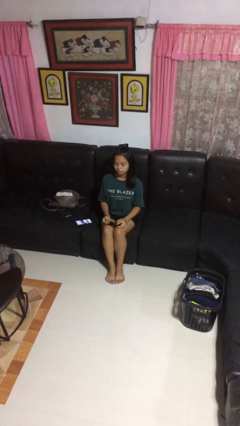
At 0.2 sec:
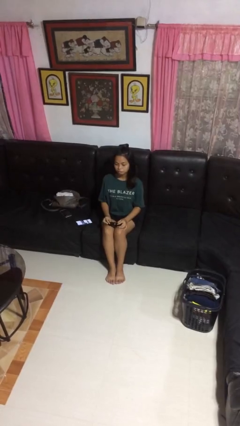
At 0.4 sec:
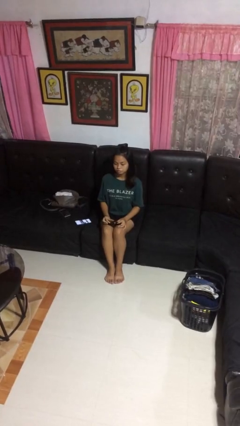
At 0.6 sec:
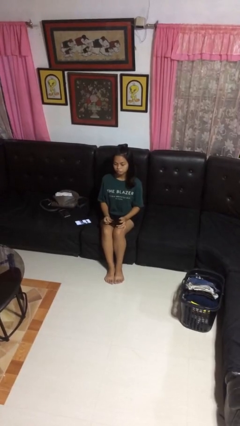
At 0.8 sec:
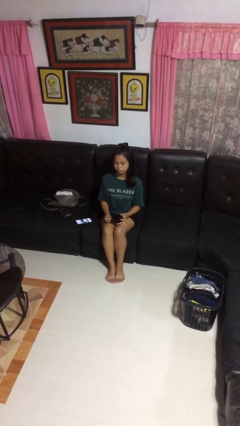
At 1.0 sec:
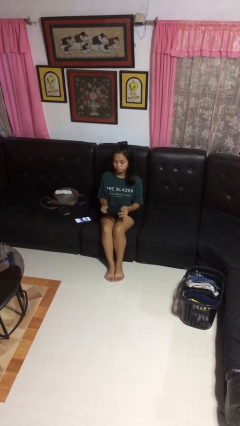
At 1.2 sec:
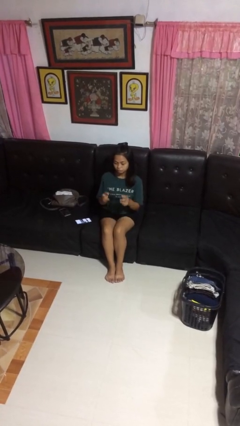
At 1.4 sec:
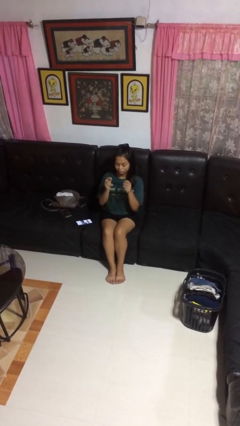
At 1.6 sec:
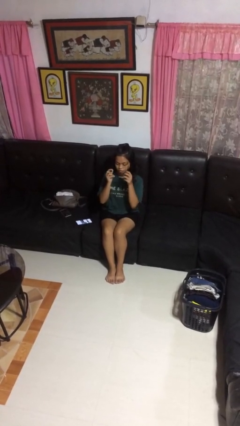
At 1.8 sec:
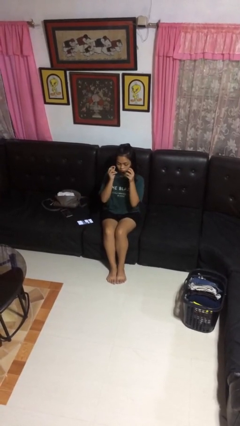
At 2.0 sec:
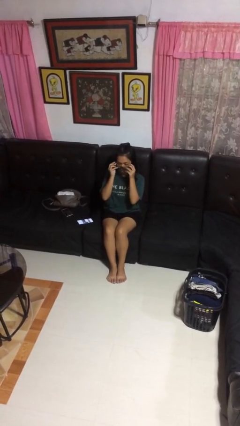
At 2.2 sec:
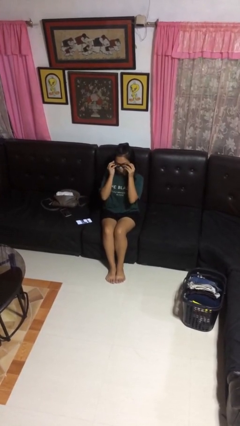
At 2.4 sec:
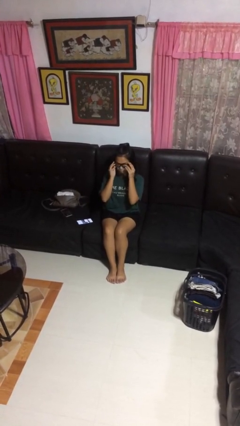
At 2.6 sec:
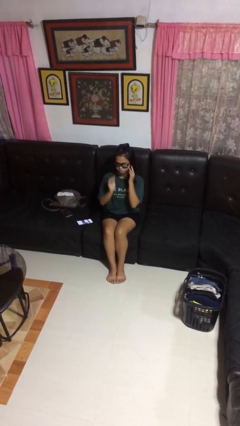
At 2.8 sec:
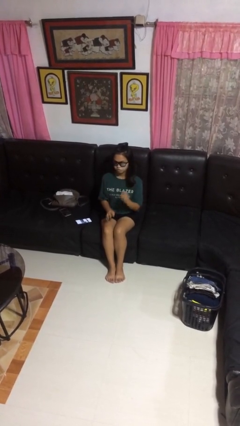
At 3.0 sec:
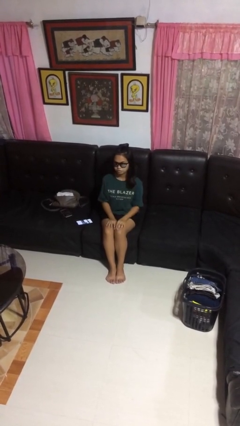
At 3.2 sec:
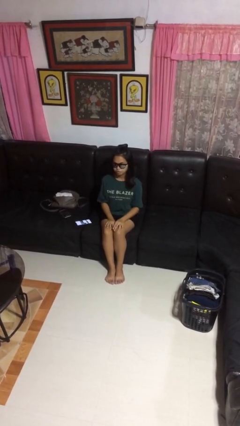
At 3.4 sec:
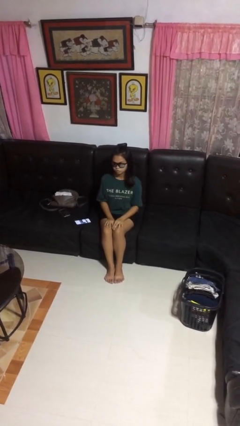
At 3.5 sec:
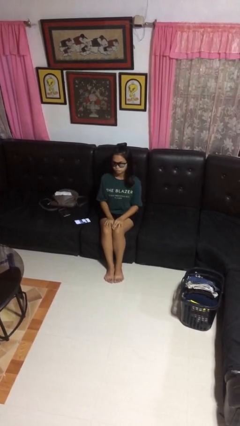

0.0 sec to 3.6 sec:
person puts on sunglasses

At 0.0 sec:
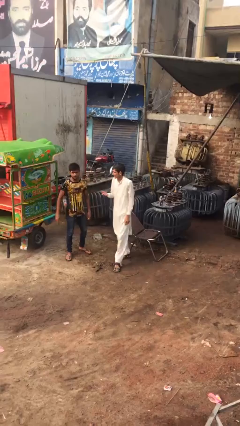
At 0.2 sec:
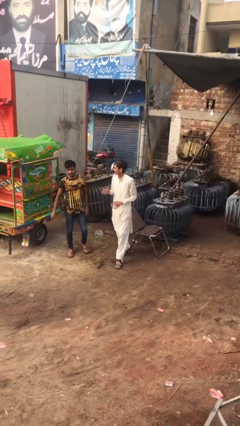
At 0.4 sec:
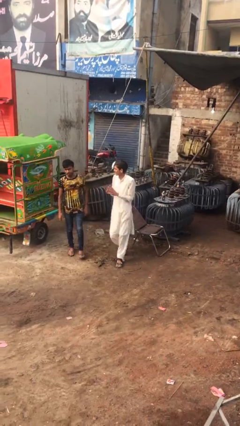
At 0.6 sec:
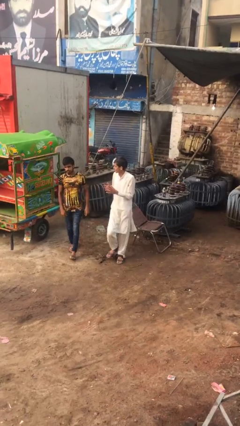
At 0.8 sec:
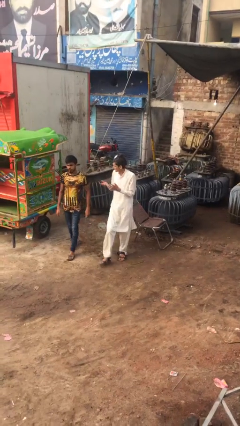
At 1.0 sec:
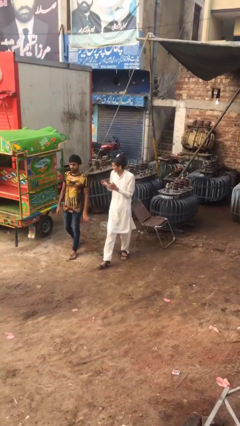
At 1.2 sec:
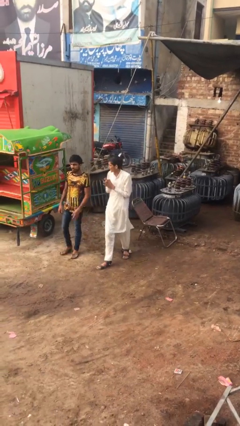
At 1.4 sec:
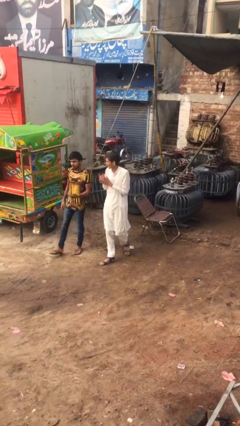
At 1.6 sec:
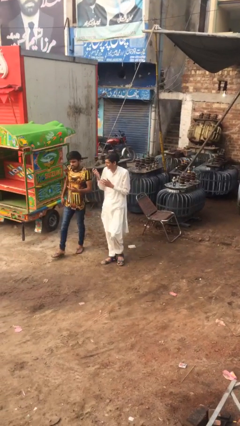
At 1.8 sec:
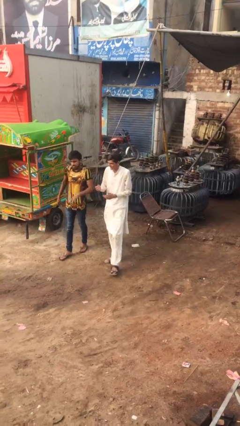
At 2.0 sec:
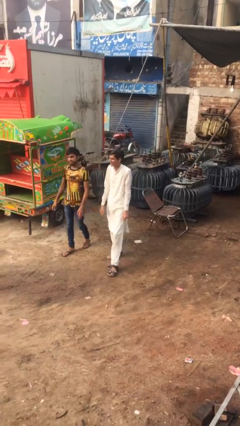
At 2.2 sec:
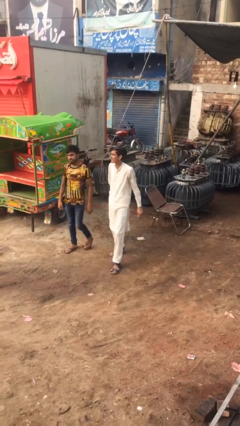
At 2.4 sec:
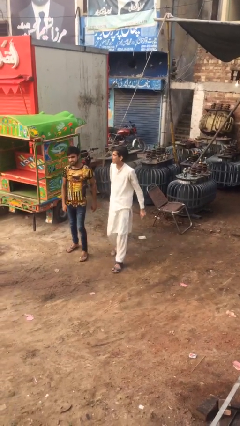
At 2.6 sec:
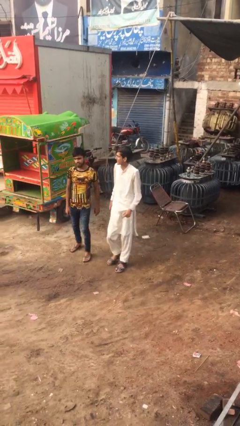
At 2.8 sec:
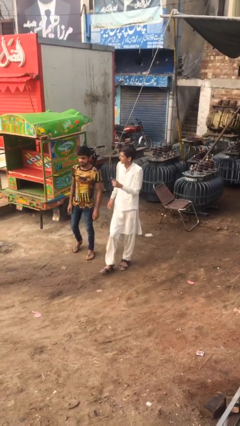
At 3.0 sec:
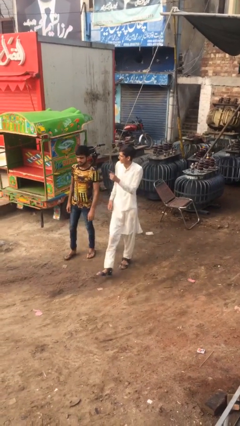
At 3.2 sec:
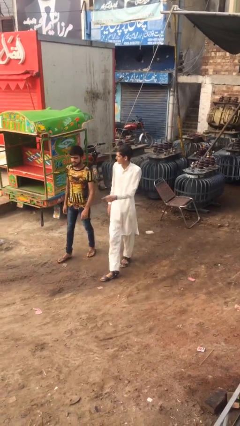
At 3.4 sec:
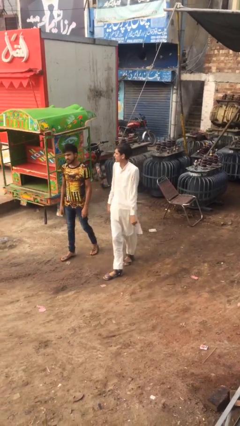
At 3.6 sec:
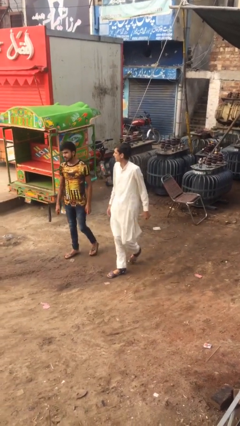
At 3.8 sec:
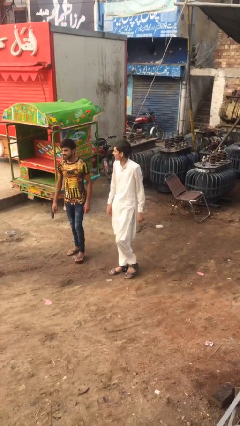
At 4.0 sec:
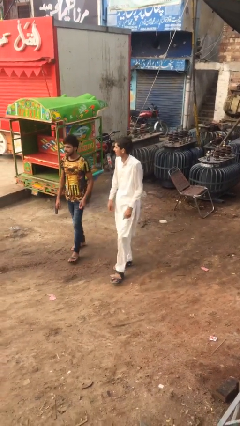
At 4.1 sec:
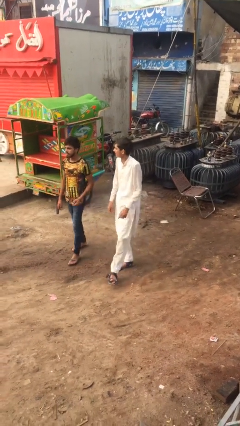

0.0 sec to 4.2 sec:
person talks to person

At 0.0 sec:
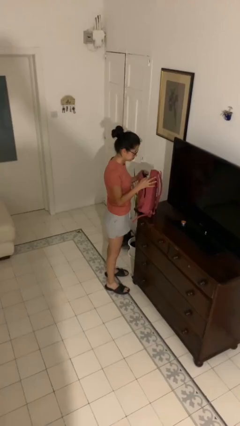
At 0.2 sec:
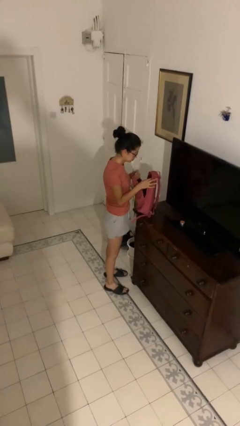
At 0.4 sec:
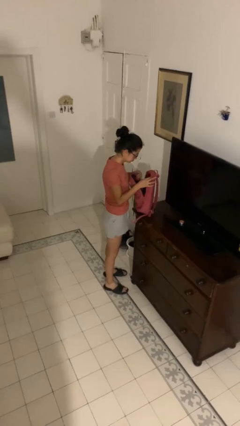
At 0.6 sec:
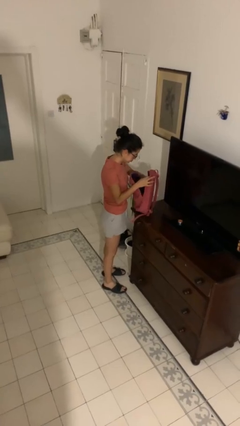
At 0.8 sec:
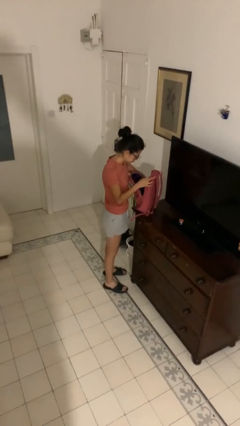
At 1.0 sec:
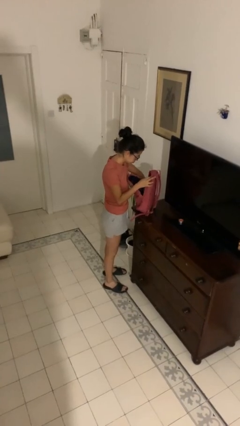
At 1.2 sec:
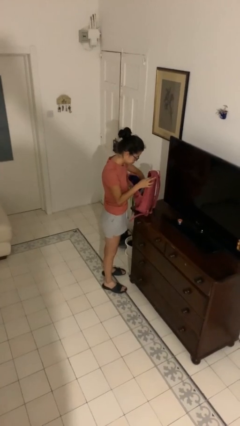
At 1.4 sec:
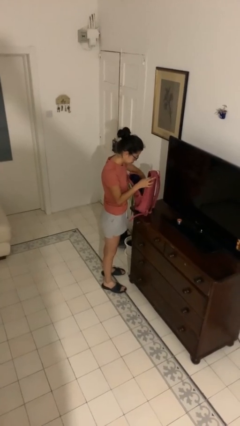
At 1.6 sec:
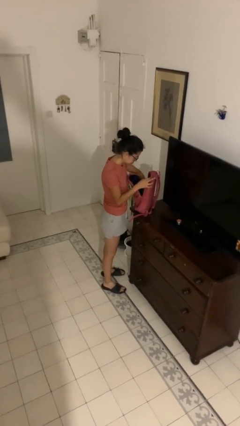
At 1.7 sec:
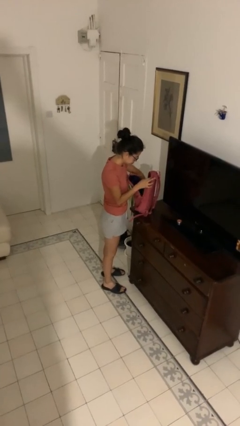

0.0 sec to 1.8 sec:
person searches in backpack

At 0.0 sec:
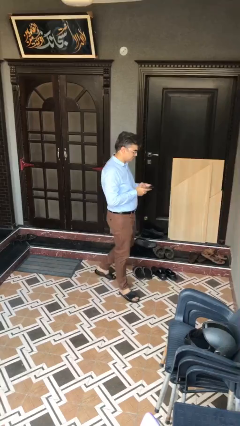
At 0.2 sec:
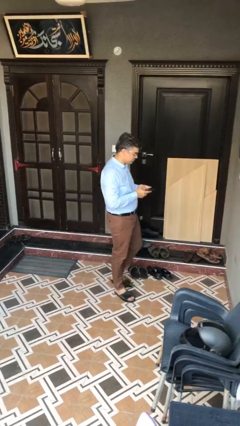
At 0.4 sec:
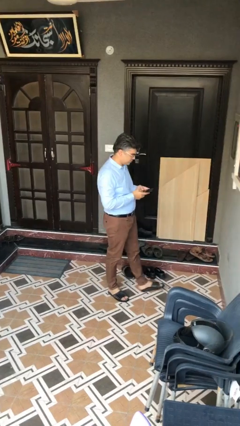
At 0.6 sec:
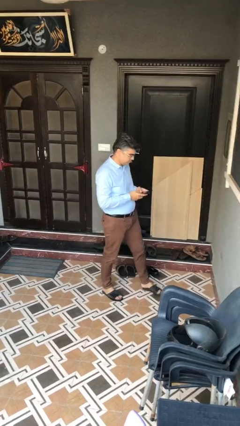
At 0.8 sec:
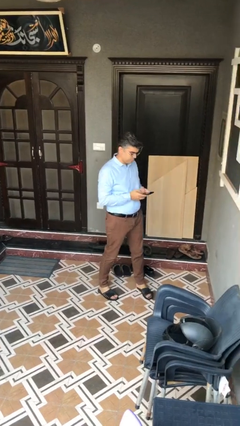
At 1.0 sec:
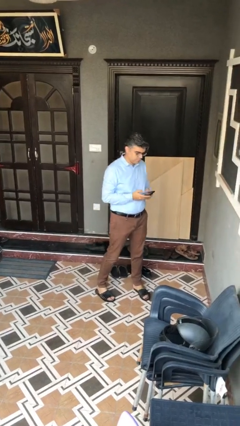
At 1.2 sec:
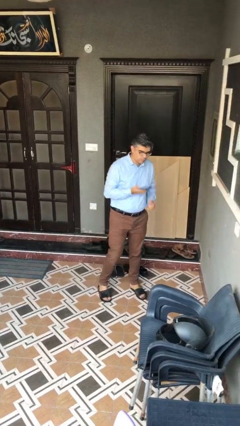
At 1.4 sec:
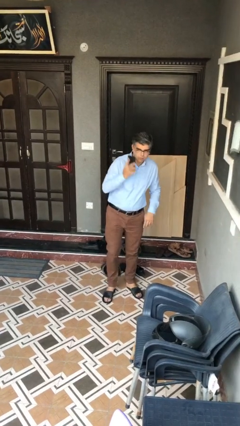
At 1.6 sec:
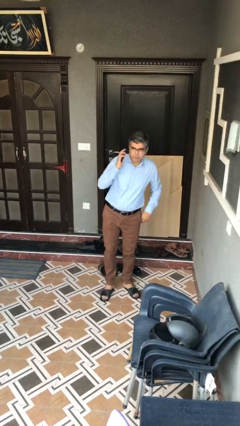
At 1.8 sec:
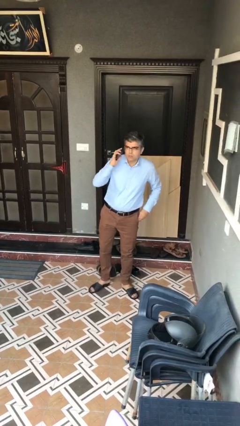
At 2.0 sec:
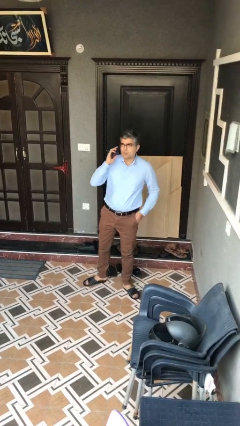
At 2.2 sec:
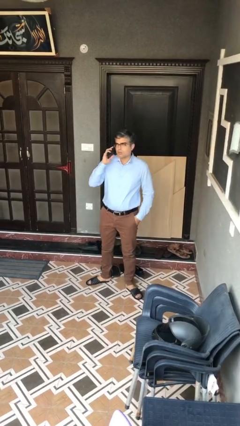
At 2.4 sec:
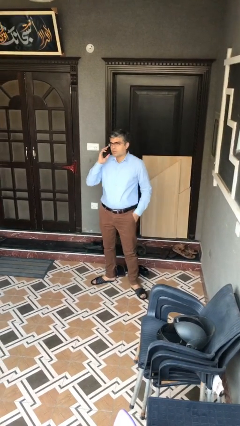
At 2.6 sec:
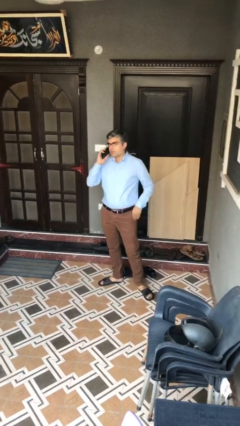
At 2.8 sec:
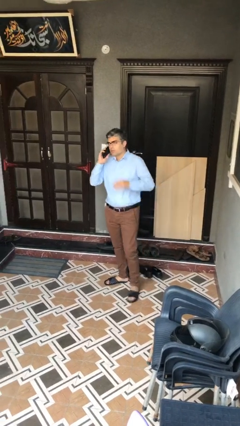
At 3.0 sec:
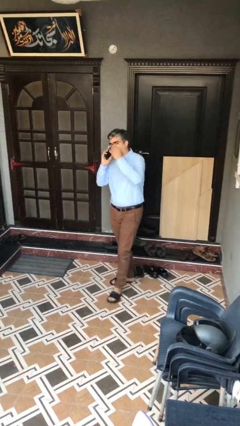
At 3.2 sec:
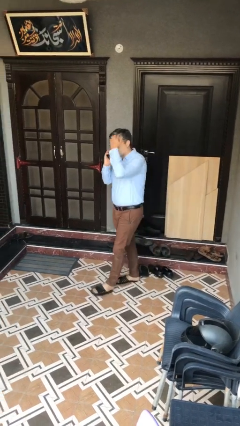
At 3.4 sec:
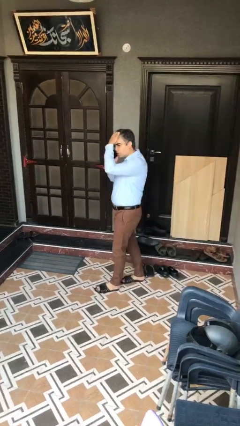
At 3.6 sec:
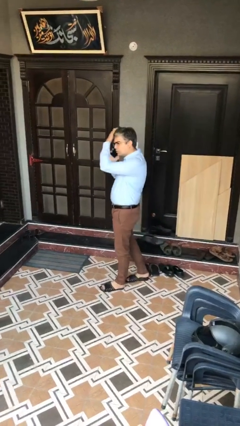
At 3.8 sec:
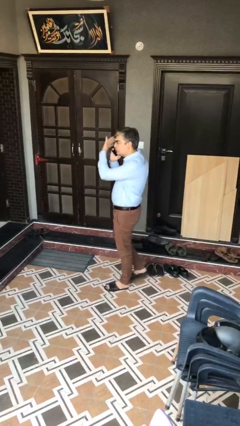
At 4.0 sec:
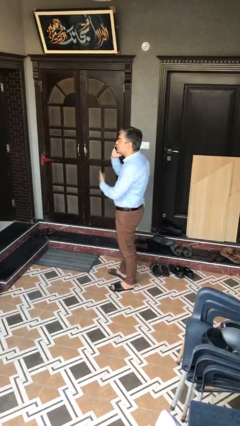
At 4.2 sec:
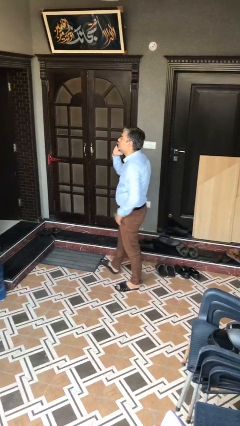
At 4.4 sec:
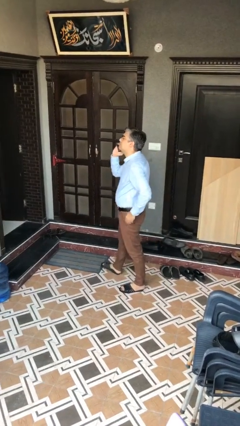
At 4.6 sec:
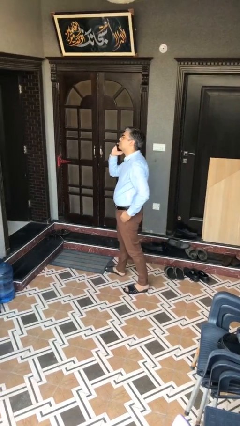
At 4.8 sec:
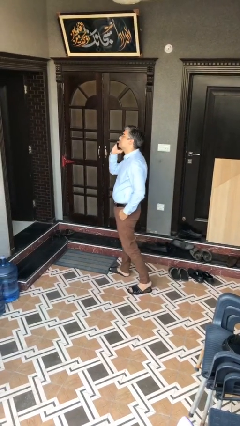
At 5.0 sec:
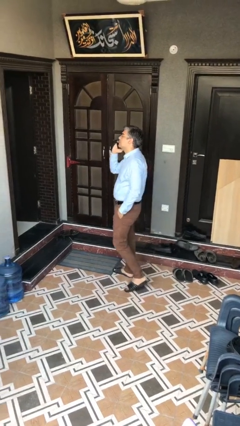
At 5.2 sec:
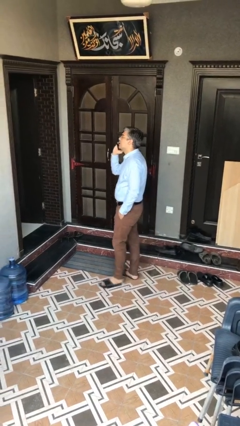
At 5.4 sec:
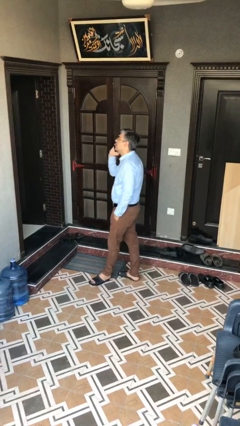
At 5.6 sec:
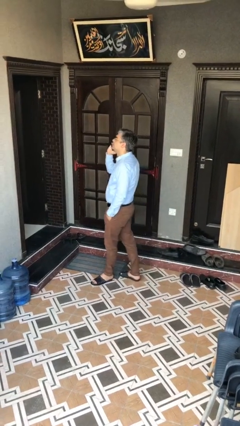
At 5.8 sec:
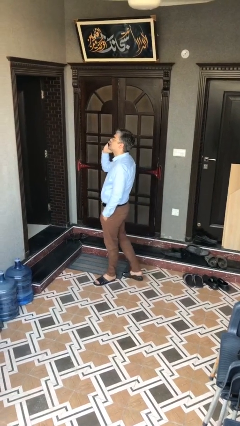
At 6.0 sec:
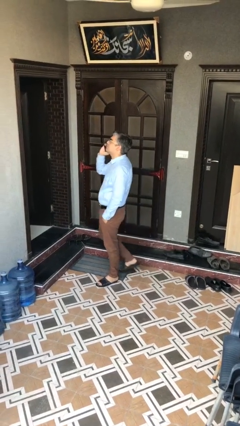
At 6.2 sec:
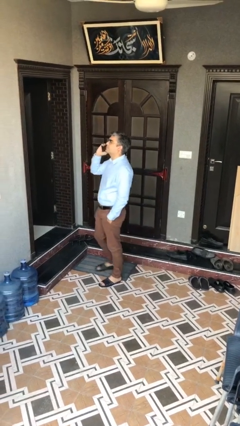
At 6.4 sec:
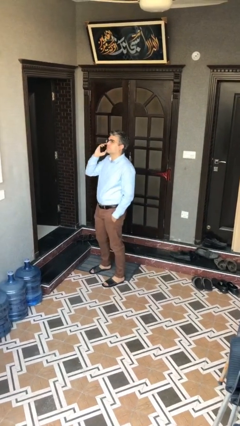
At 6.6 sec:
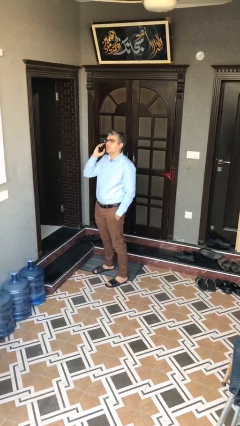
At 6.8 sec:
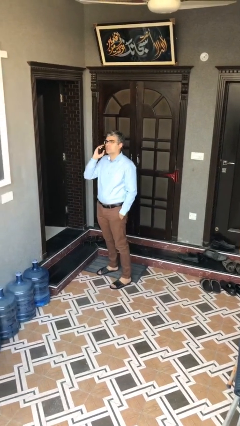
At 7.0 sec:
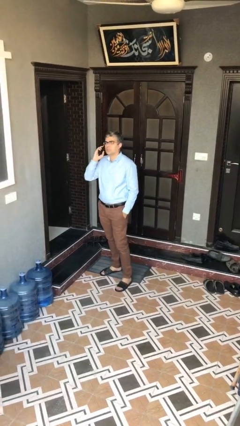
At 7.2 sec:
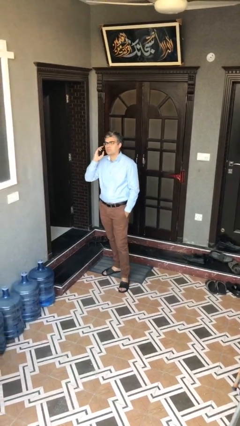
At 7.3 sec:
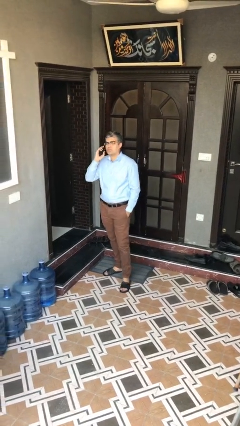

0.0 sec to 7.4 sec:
person talks on phone

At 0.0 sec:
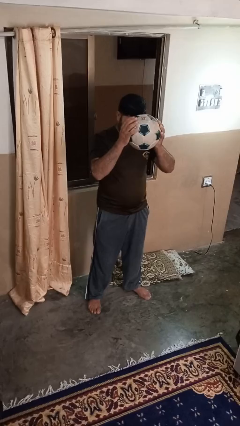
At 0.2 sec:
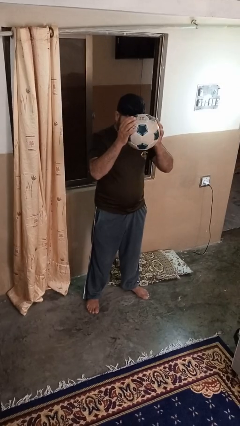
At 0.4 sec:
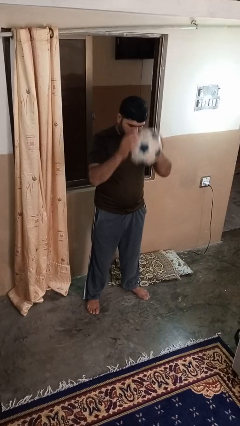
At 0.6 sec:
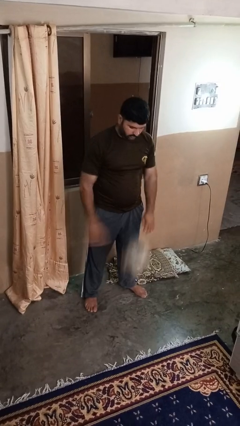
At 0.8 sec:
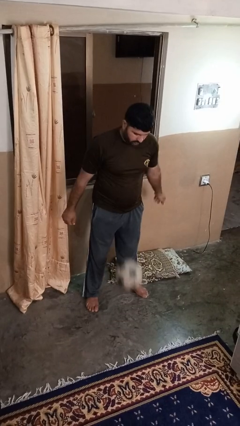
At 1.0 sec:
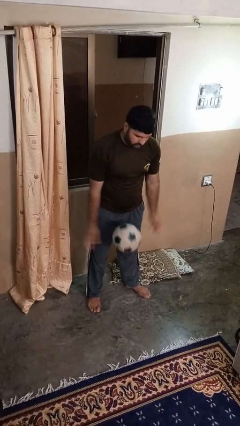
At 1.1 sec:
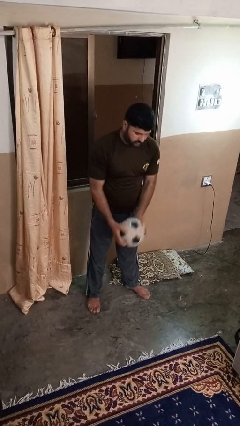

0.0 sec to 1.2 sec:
person bounces ball on floor
